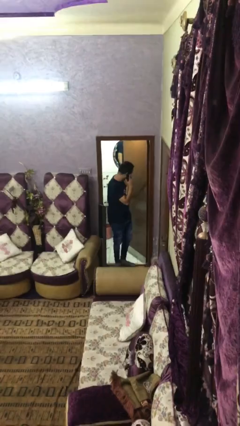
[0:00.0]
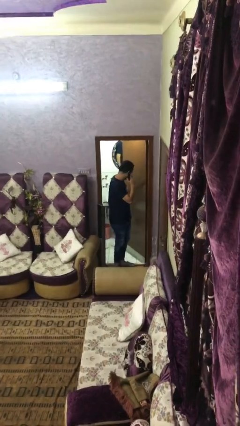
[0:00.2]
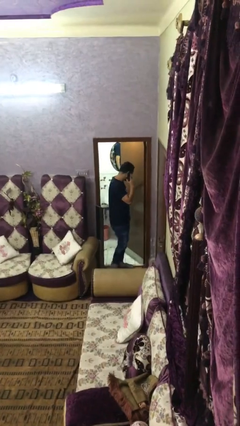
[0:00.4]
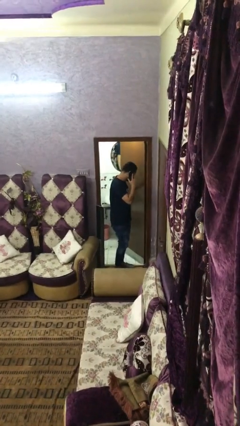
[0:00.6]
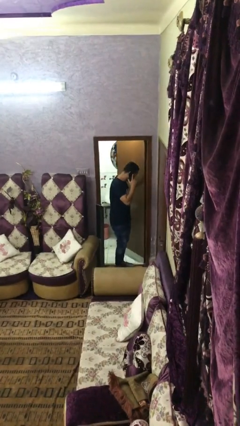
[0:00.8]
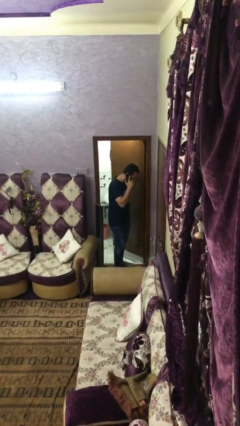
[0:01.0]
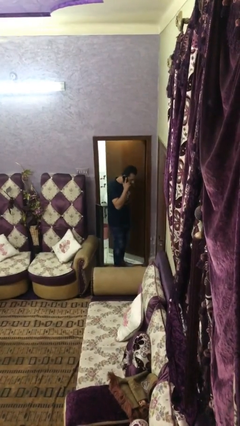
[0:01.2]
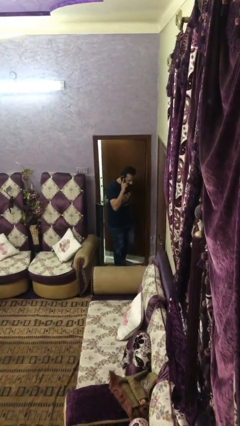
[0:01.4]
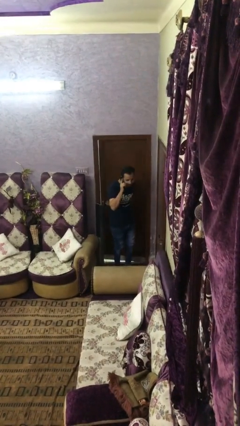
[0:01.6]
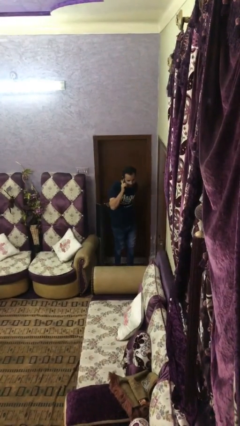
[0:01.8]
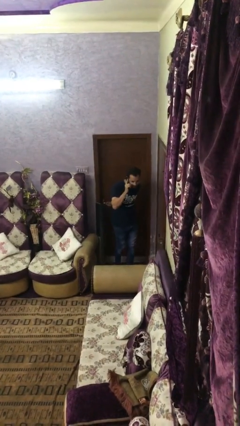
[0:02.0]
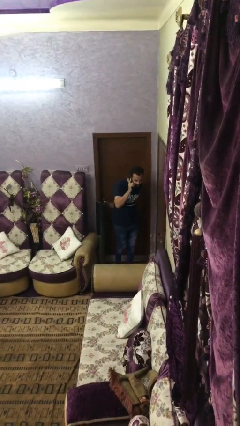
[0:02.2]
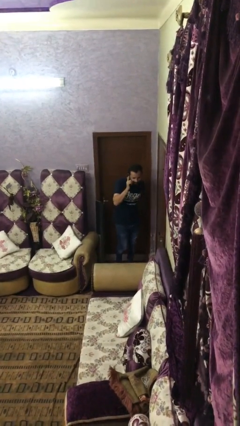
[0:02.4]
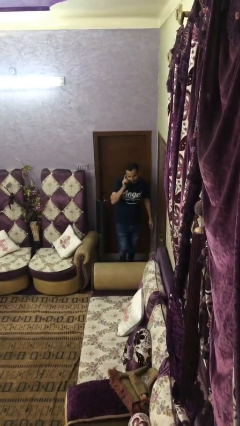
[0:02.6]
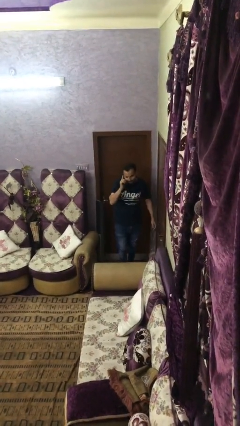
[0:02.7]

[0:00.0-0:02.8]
person closes facility door

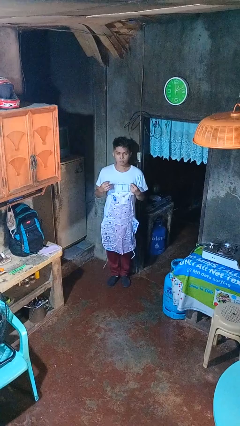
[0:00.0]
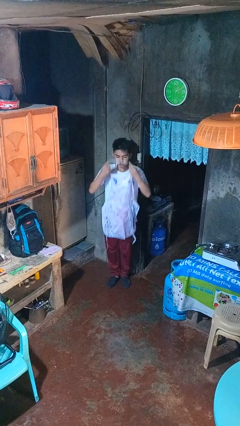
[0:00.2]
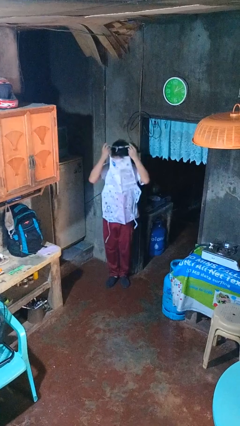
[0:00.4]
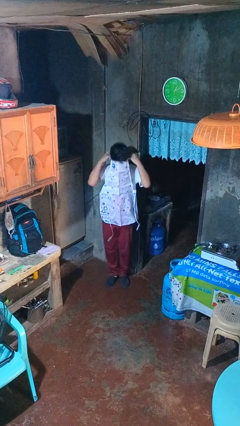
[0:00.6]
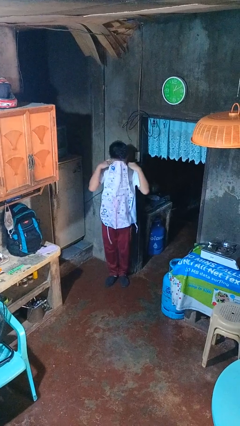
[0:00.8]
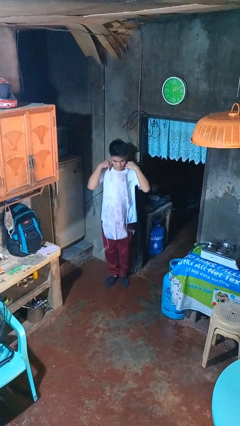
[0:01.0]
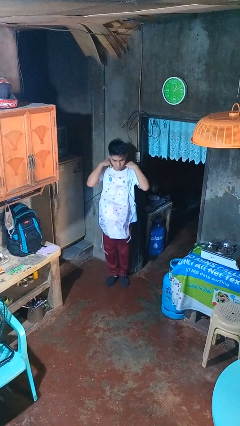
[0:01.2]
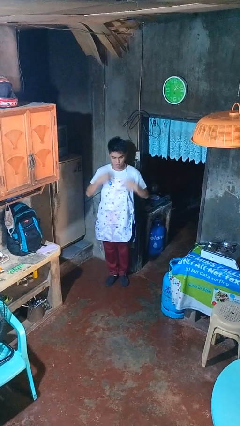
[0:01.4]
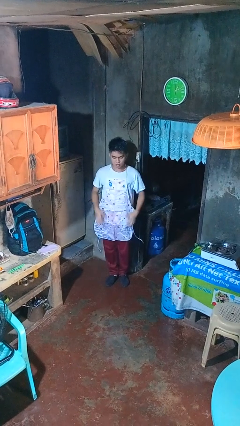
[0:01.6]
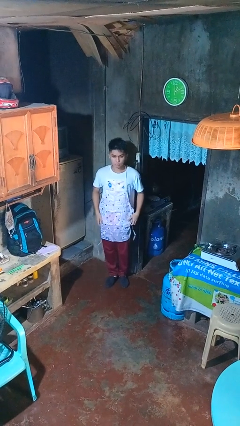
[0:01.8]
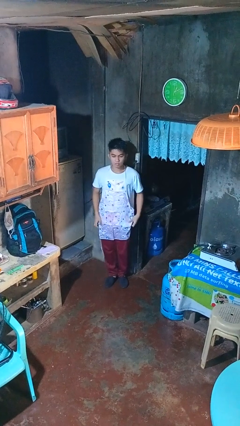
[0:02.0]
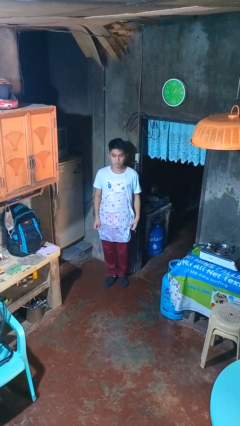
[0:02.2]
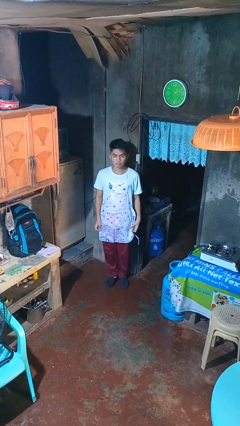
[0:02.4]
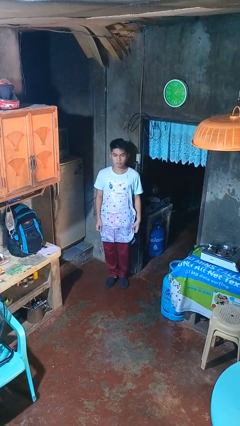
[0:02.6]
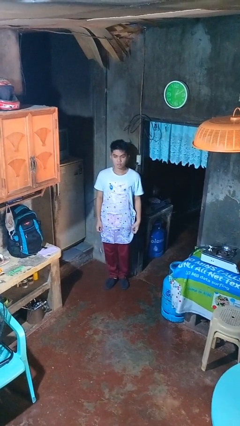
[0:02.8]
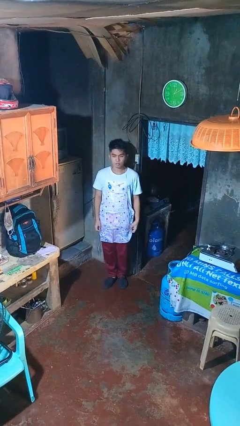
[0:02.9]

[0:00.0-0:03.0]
person puts on apron

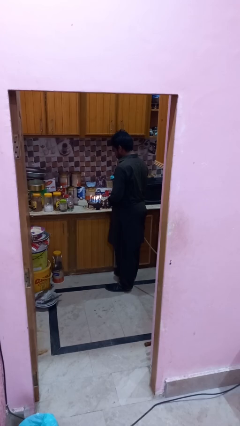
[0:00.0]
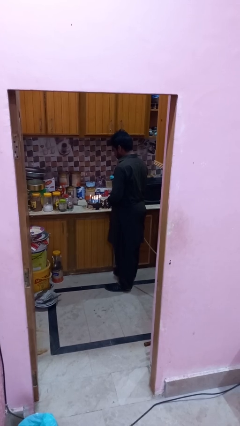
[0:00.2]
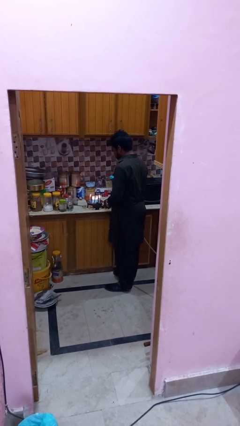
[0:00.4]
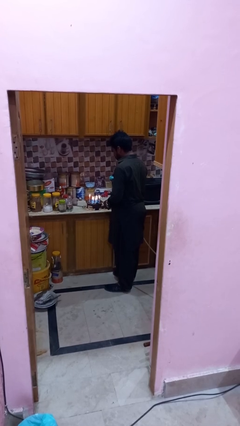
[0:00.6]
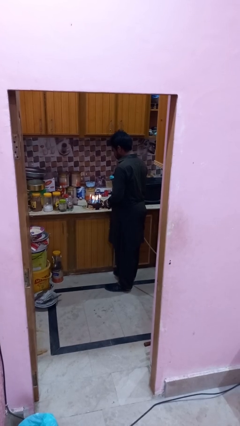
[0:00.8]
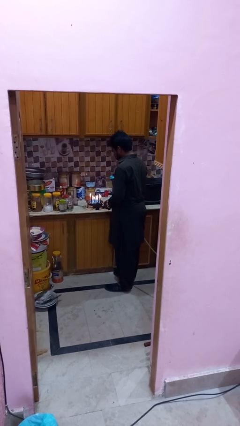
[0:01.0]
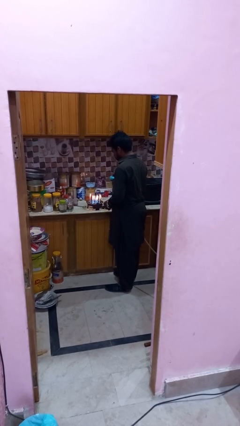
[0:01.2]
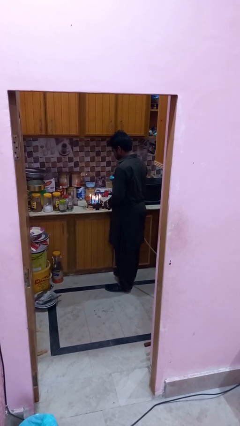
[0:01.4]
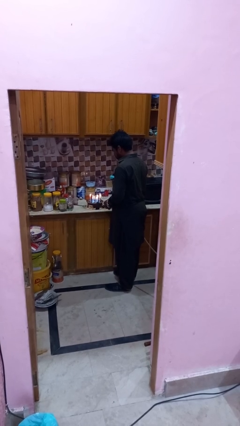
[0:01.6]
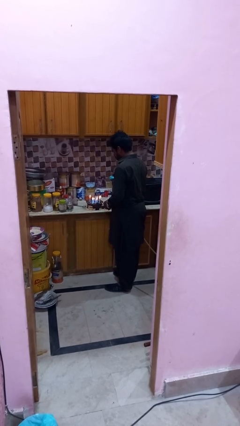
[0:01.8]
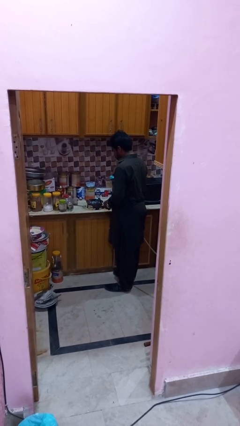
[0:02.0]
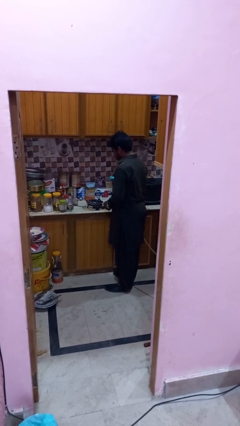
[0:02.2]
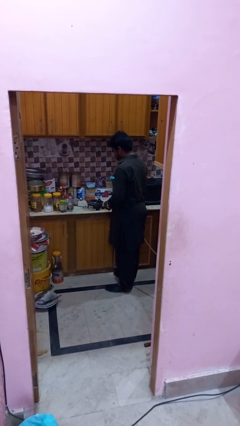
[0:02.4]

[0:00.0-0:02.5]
person turns off stovetop

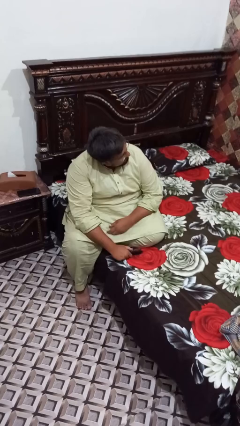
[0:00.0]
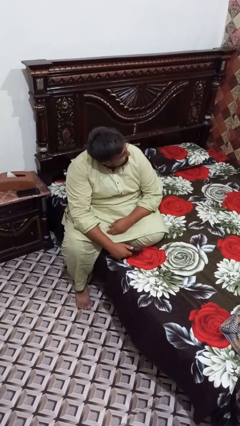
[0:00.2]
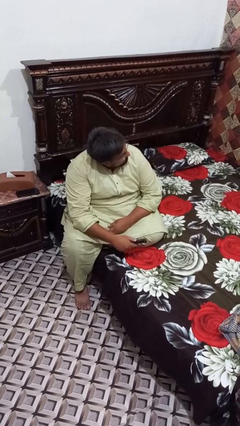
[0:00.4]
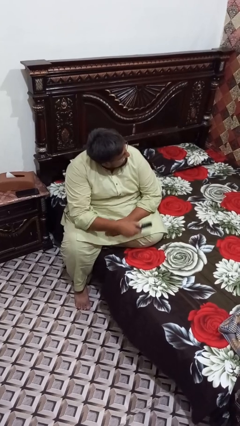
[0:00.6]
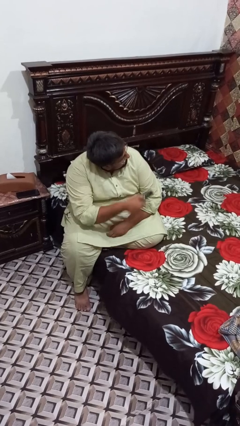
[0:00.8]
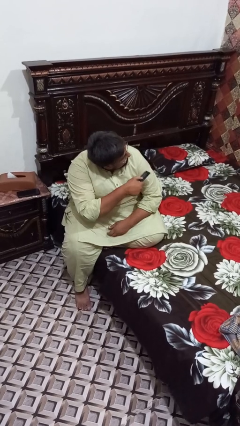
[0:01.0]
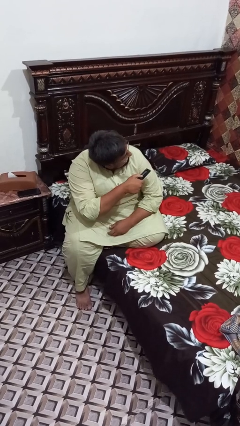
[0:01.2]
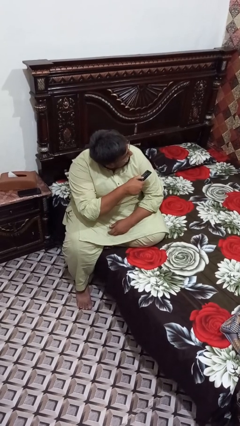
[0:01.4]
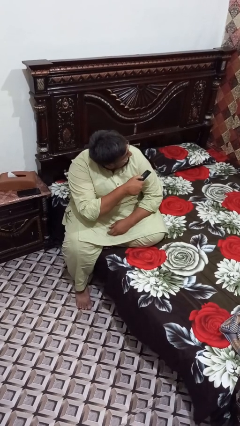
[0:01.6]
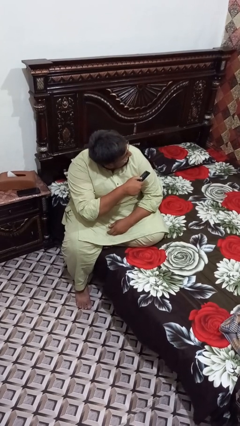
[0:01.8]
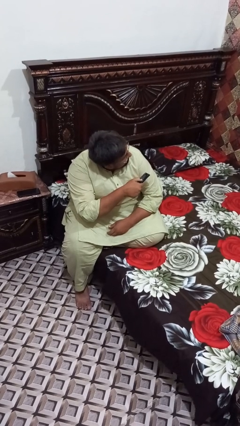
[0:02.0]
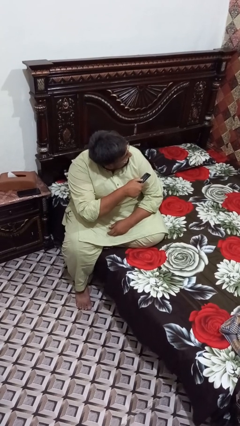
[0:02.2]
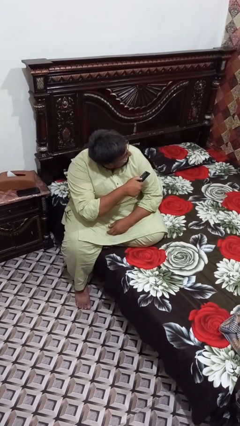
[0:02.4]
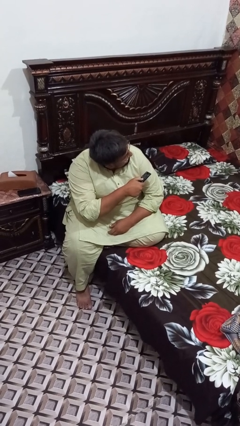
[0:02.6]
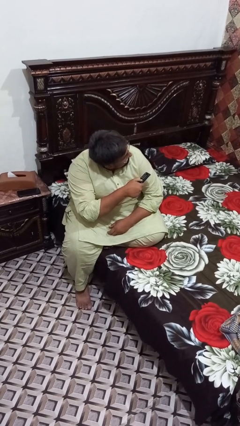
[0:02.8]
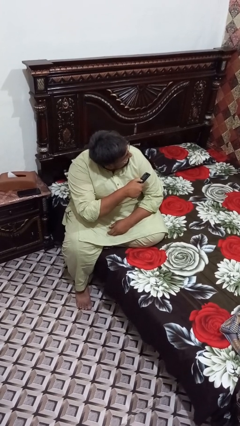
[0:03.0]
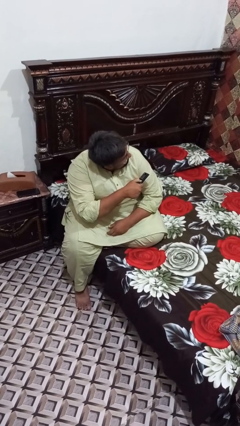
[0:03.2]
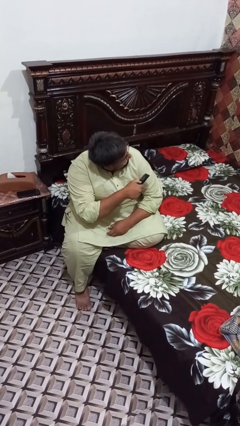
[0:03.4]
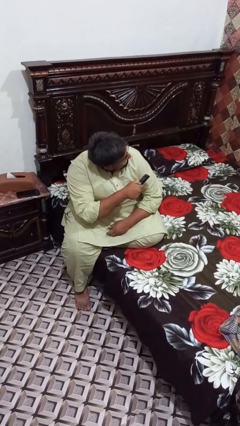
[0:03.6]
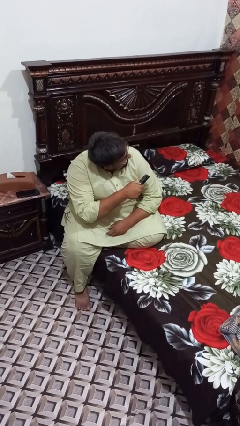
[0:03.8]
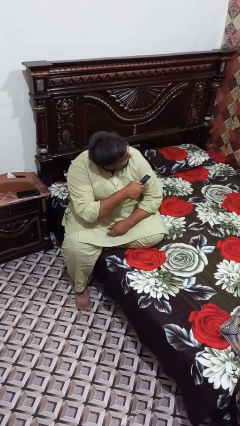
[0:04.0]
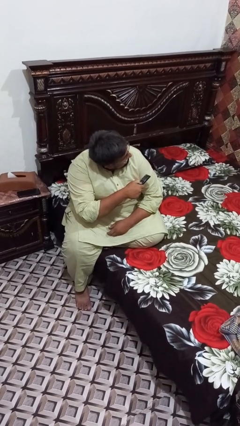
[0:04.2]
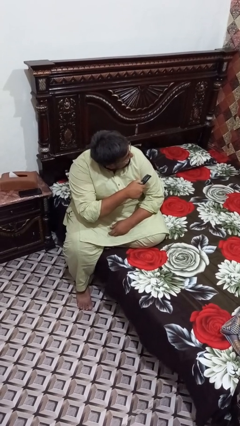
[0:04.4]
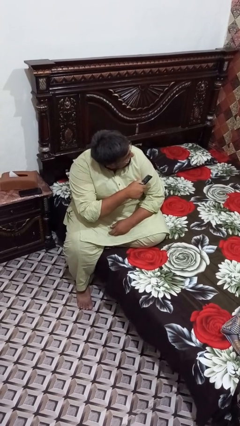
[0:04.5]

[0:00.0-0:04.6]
person uses television remote

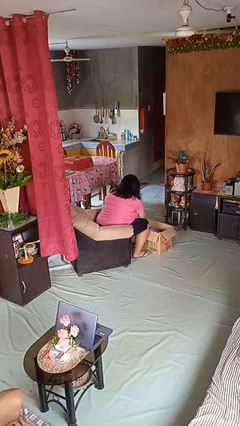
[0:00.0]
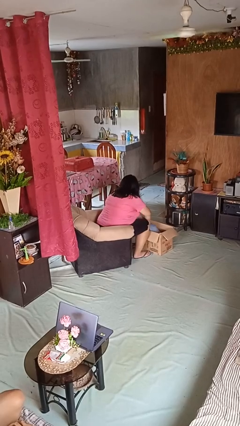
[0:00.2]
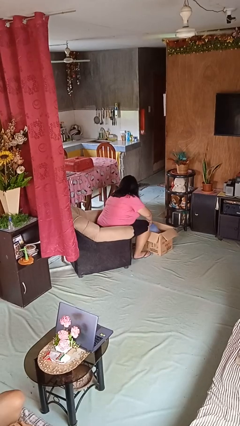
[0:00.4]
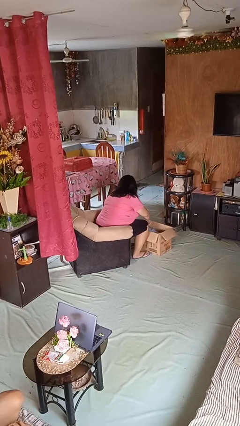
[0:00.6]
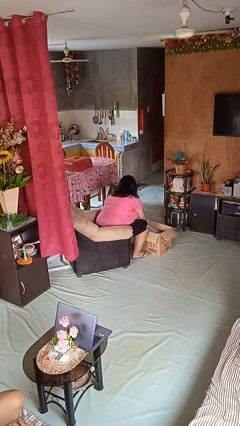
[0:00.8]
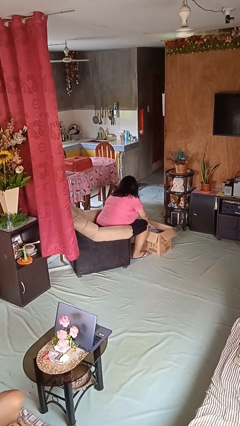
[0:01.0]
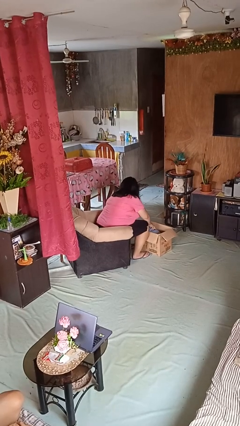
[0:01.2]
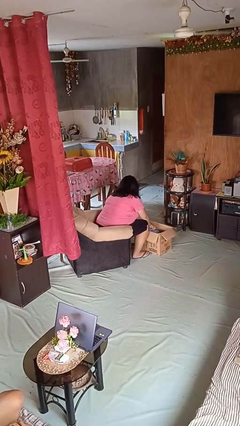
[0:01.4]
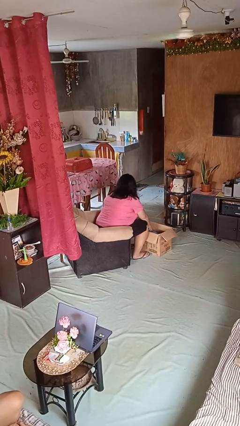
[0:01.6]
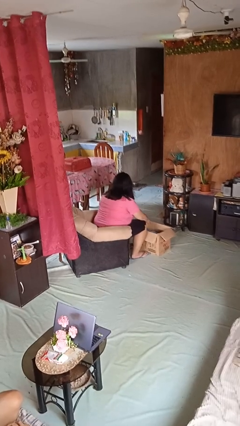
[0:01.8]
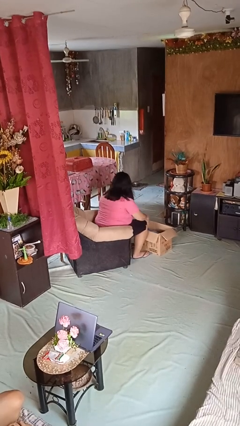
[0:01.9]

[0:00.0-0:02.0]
person searches in box

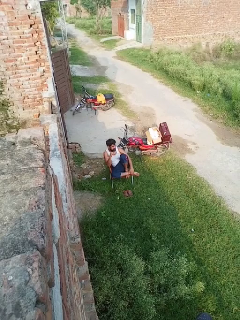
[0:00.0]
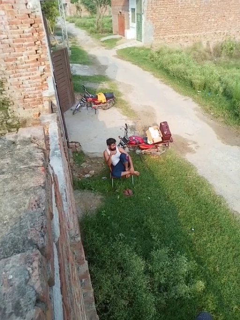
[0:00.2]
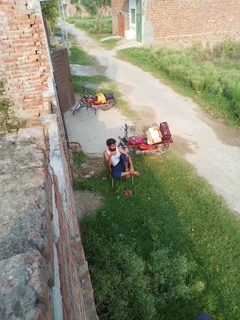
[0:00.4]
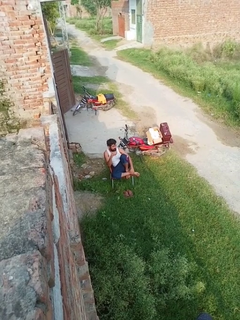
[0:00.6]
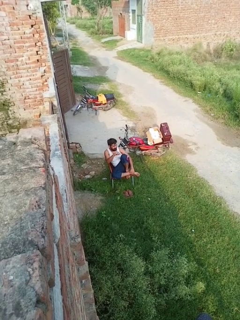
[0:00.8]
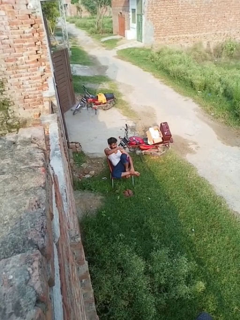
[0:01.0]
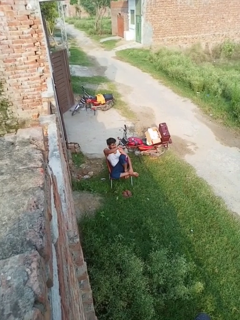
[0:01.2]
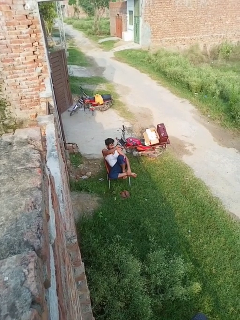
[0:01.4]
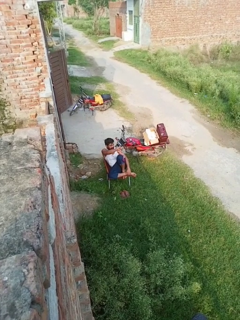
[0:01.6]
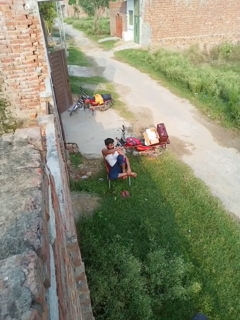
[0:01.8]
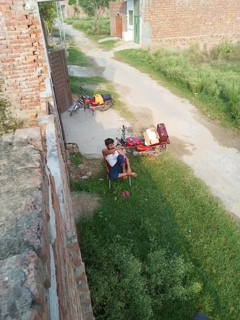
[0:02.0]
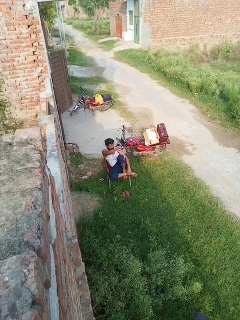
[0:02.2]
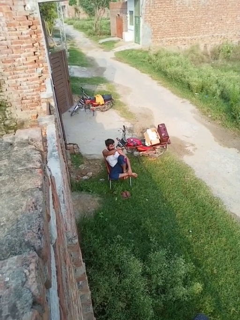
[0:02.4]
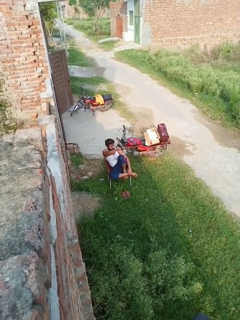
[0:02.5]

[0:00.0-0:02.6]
person gestures thumbs down

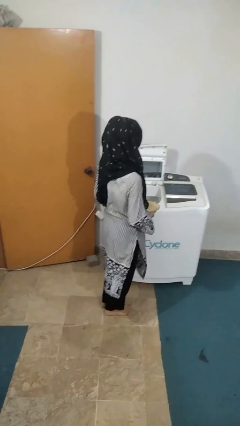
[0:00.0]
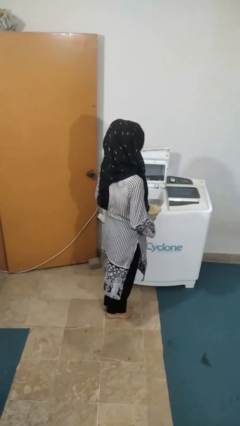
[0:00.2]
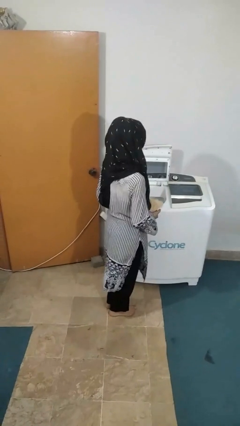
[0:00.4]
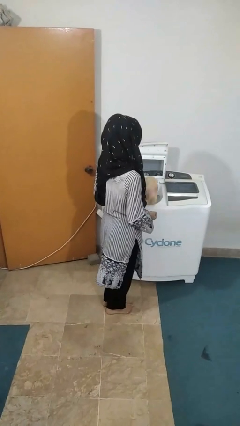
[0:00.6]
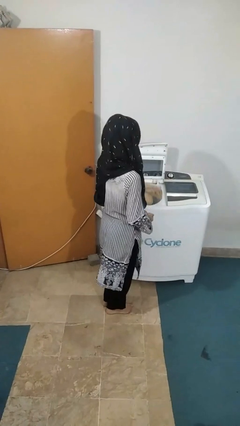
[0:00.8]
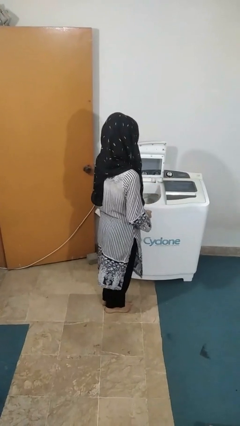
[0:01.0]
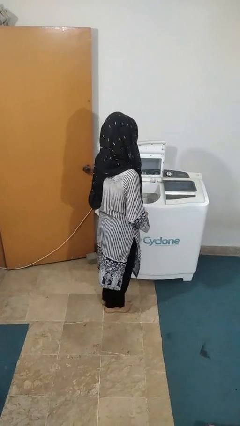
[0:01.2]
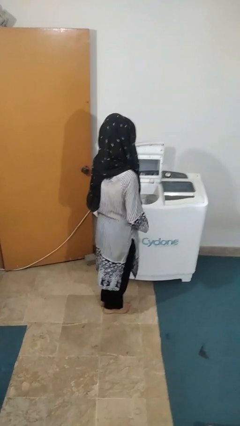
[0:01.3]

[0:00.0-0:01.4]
person loads clotheswasher
